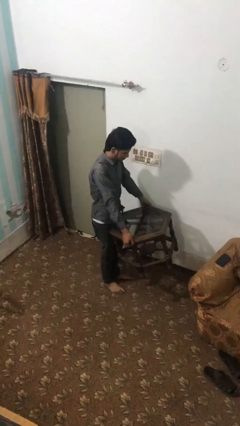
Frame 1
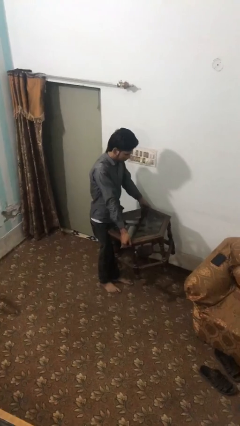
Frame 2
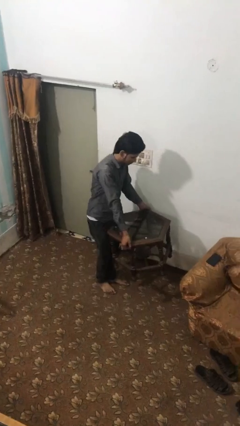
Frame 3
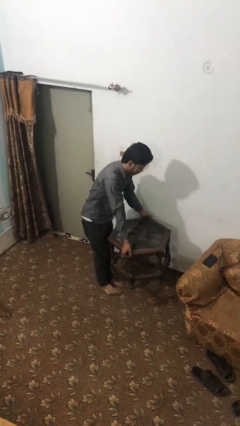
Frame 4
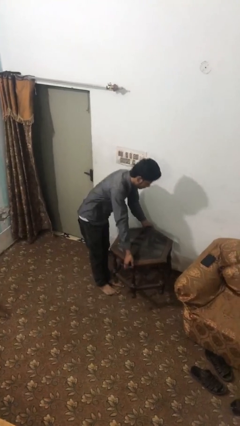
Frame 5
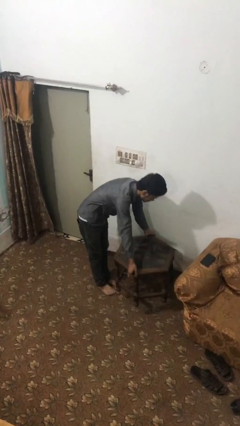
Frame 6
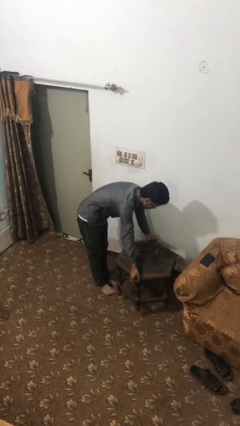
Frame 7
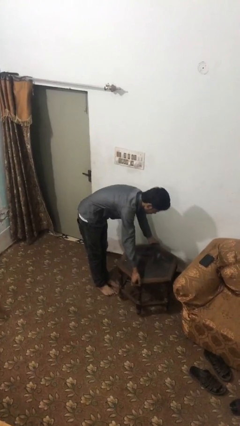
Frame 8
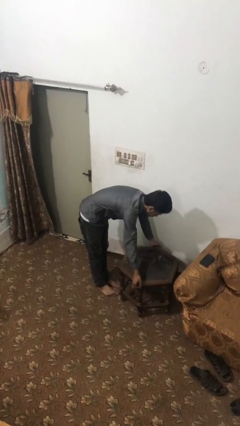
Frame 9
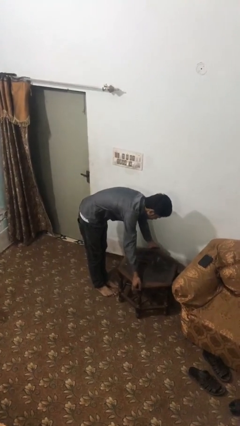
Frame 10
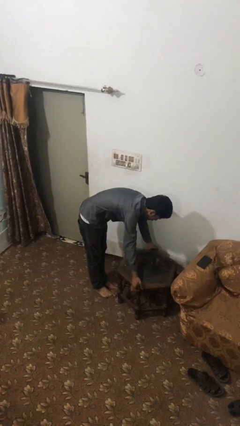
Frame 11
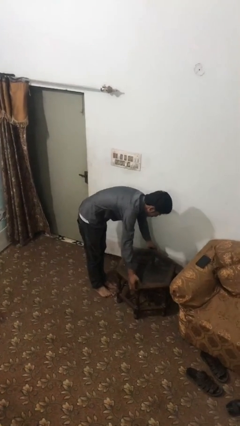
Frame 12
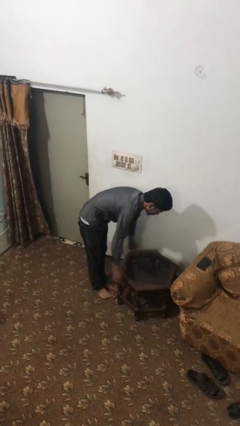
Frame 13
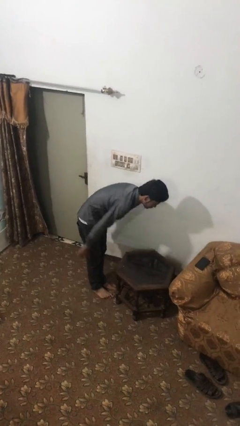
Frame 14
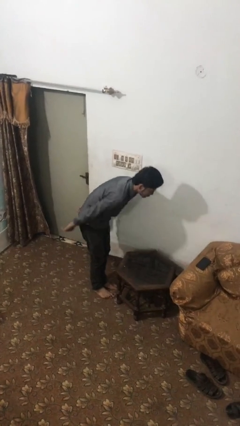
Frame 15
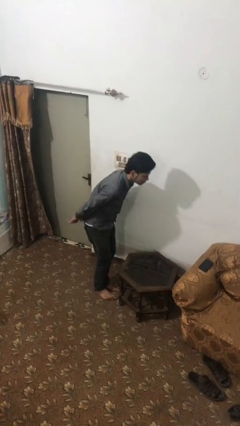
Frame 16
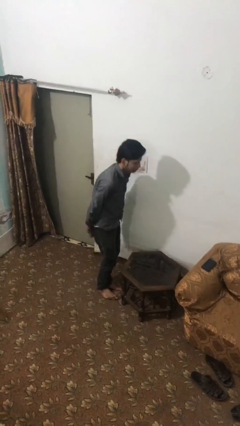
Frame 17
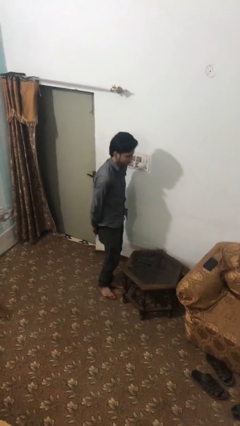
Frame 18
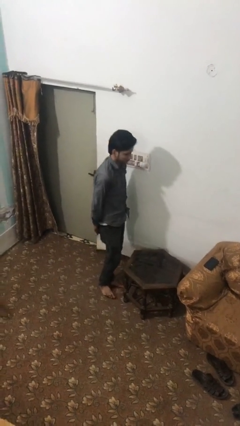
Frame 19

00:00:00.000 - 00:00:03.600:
person puts down object on floor

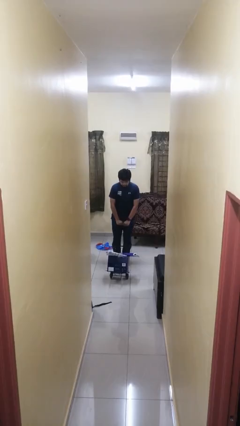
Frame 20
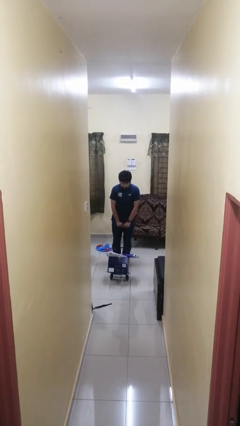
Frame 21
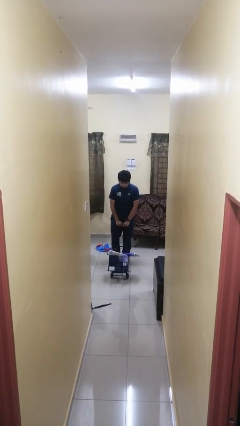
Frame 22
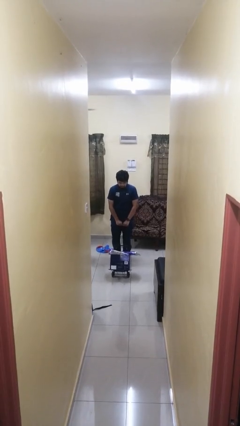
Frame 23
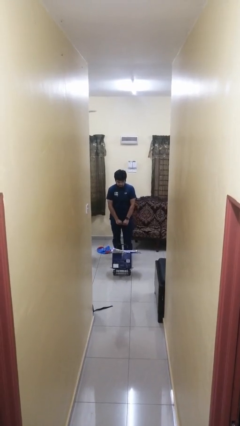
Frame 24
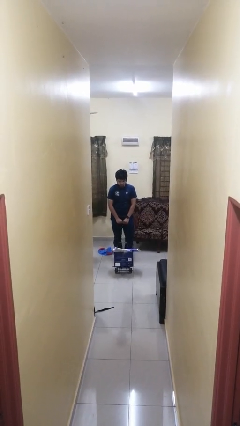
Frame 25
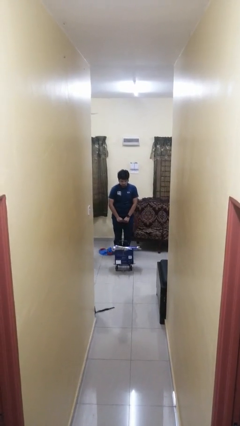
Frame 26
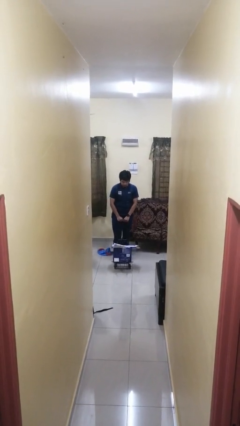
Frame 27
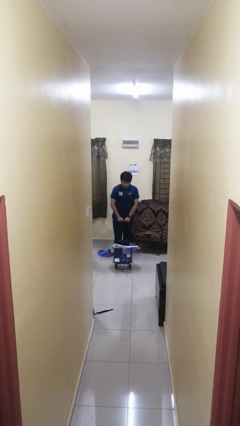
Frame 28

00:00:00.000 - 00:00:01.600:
person pulls wheeled cart

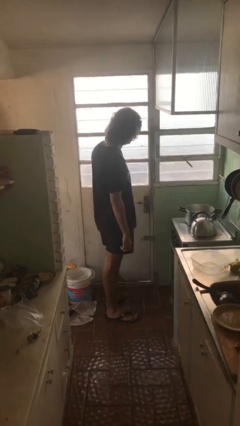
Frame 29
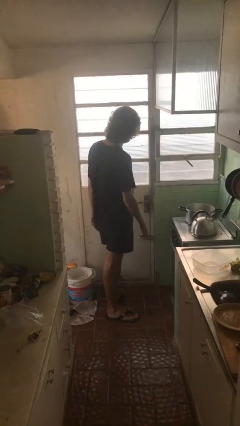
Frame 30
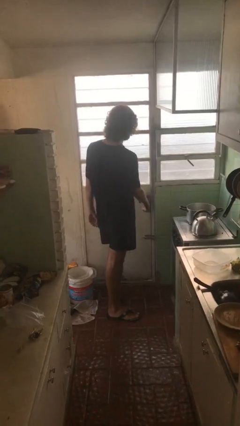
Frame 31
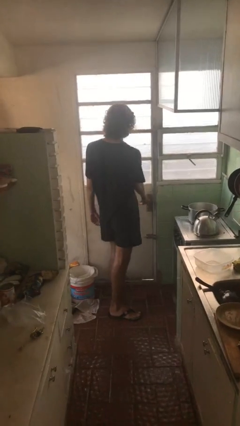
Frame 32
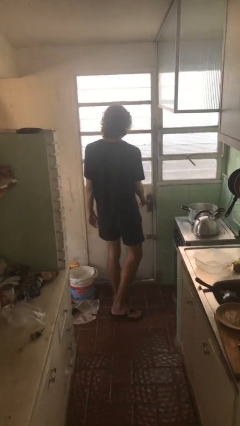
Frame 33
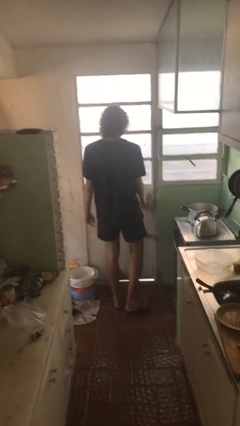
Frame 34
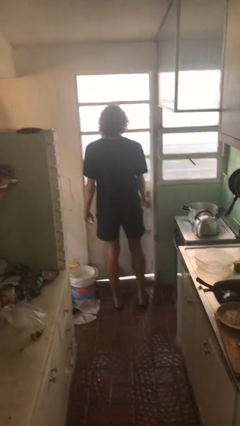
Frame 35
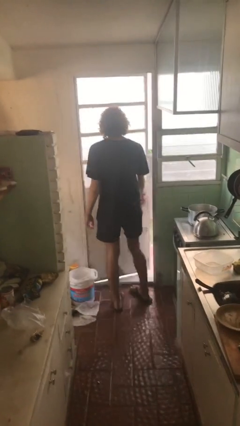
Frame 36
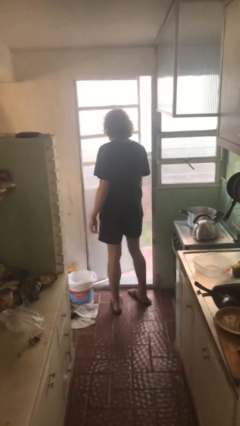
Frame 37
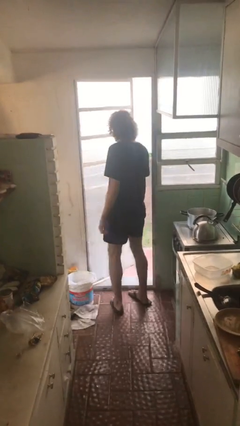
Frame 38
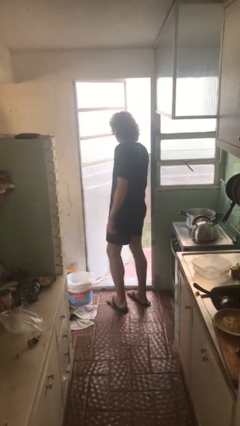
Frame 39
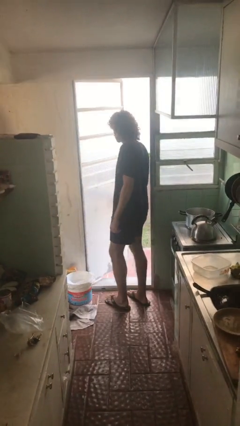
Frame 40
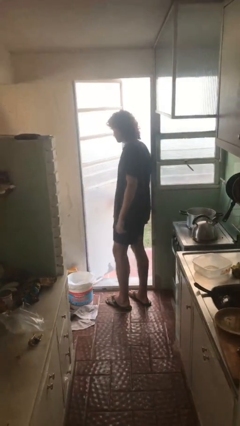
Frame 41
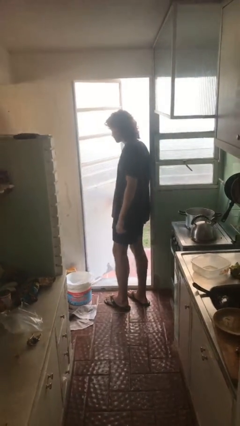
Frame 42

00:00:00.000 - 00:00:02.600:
person opens facility door

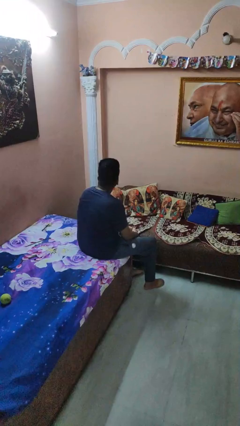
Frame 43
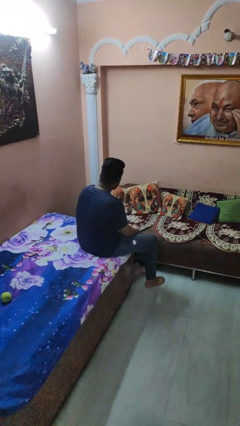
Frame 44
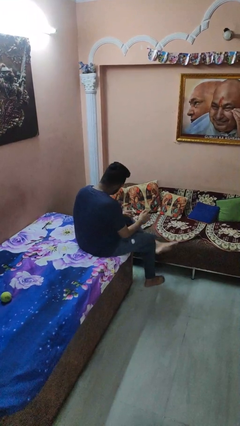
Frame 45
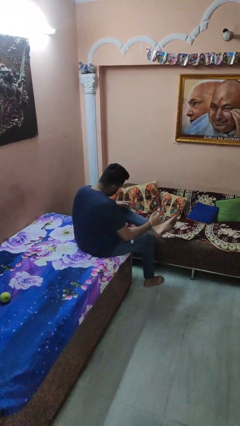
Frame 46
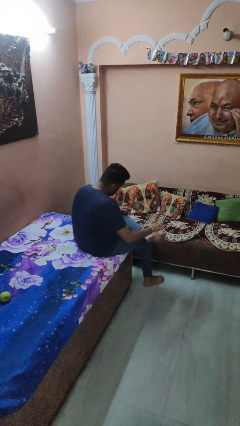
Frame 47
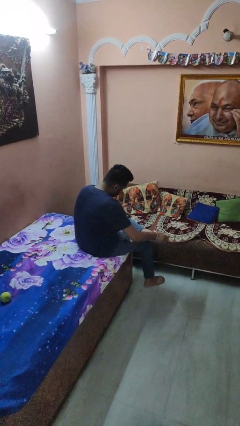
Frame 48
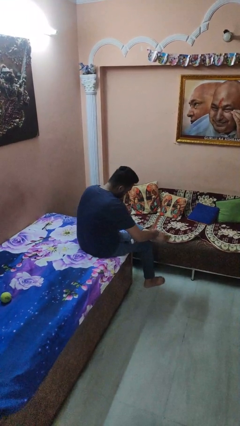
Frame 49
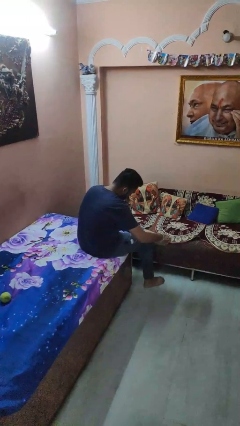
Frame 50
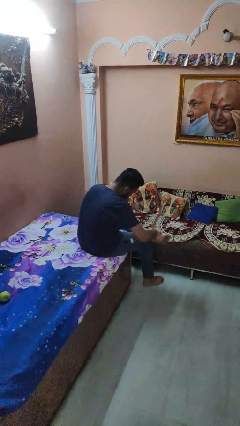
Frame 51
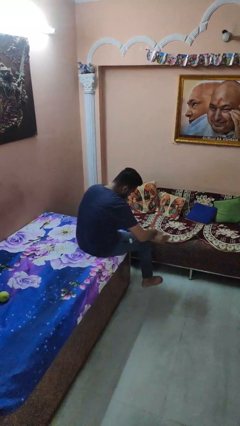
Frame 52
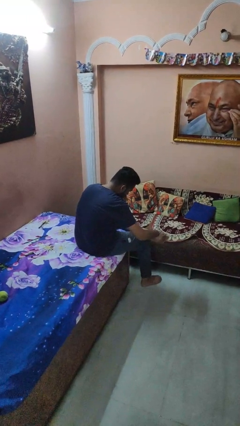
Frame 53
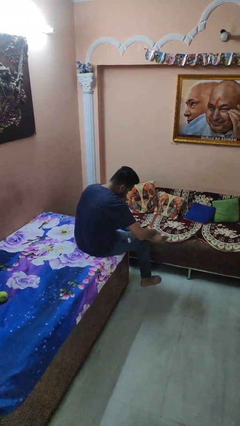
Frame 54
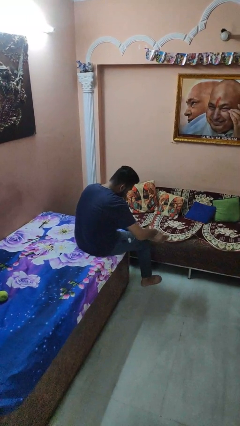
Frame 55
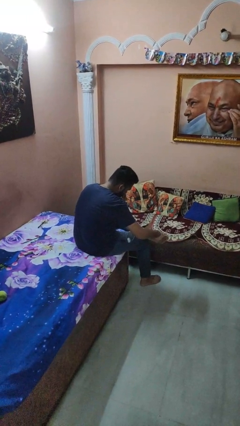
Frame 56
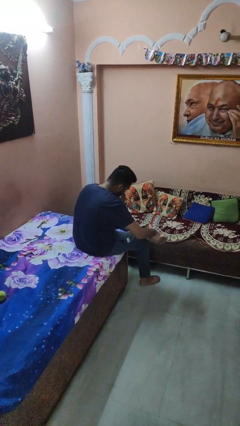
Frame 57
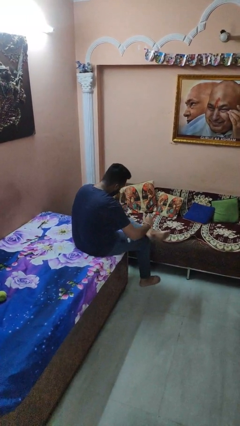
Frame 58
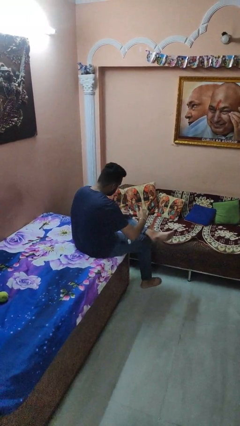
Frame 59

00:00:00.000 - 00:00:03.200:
person rubs foot

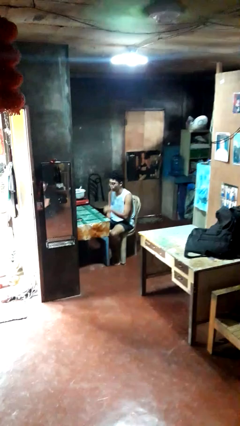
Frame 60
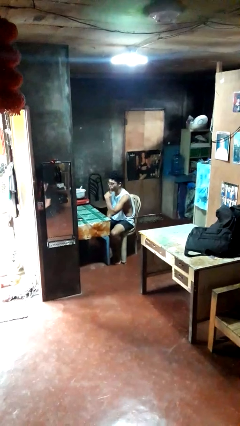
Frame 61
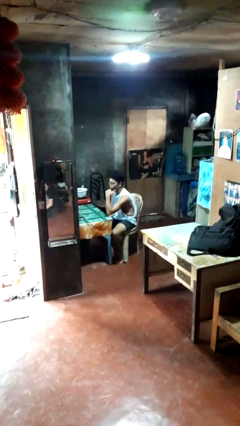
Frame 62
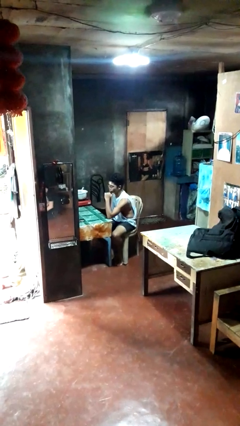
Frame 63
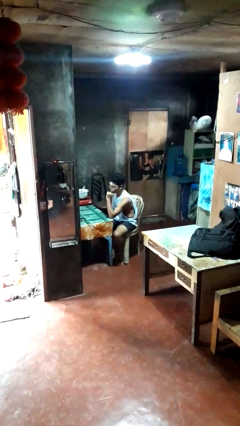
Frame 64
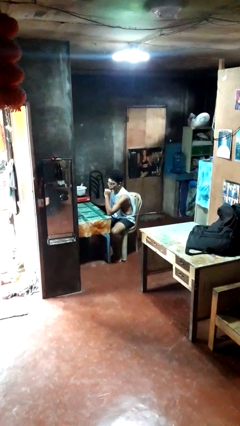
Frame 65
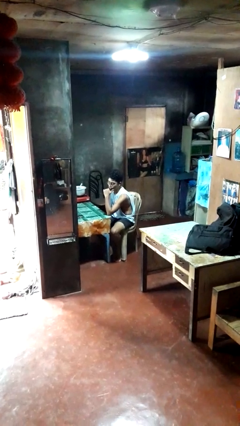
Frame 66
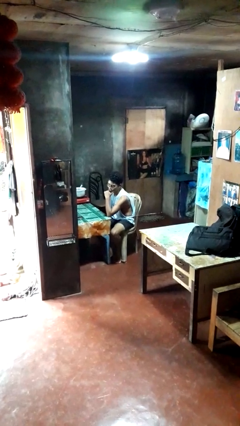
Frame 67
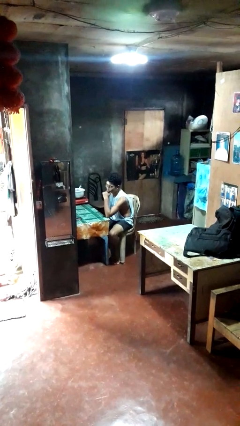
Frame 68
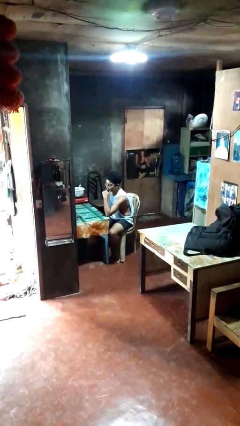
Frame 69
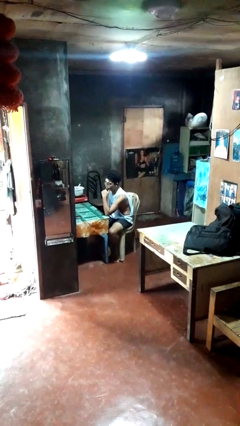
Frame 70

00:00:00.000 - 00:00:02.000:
person strokes chin

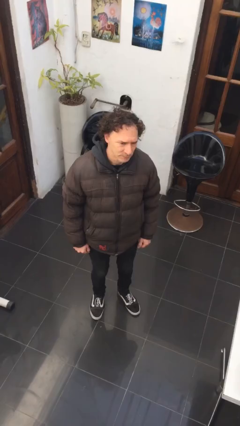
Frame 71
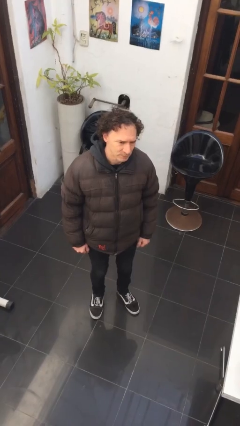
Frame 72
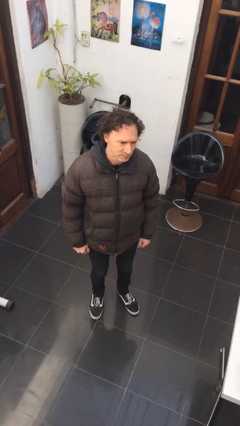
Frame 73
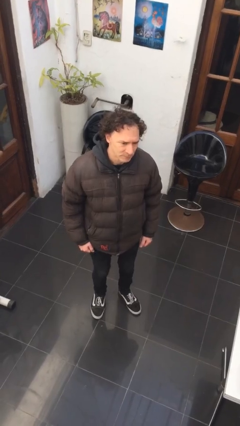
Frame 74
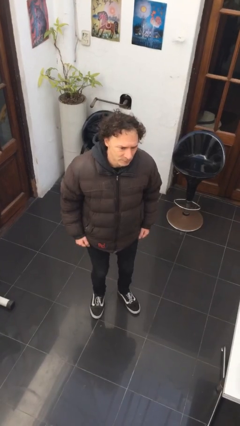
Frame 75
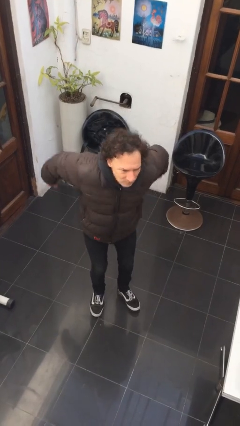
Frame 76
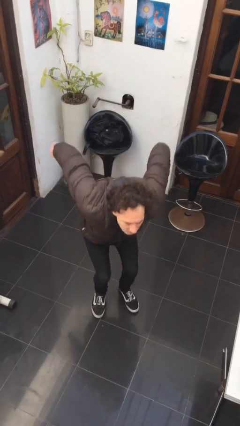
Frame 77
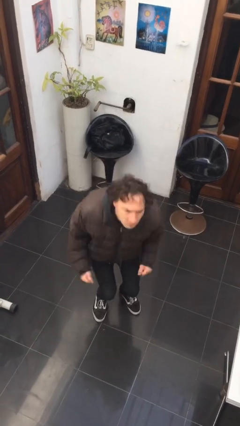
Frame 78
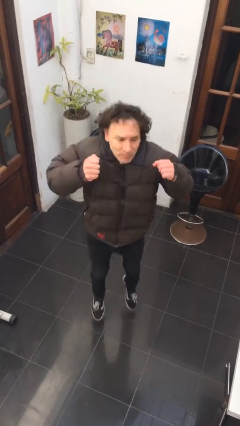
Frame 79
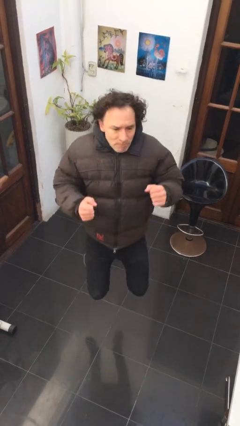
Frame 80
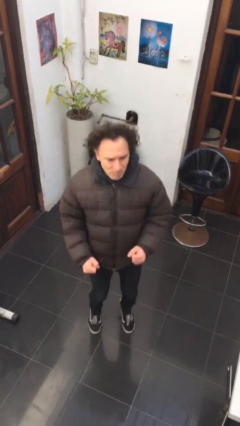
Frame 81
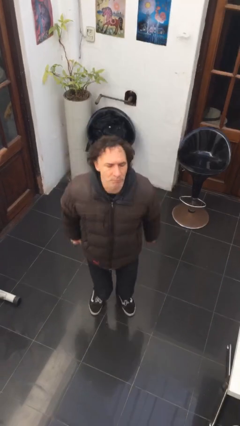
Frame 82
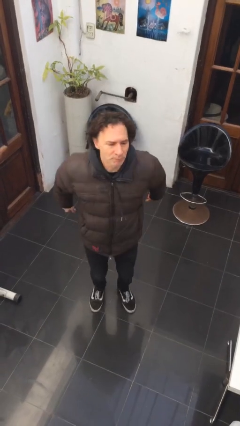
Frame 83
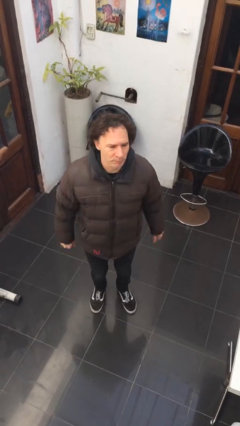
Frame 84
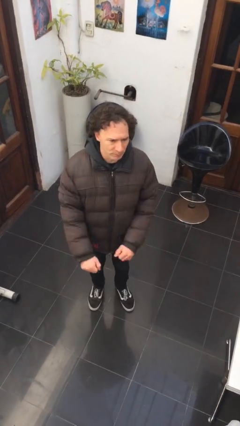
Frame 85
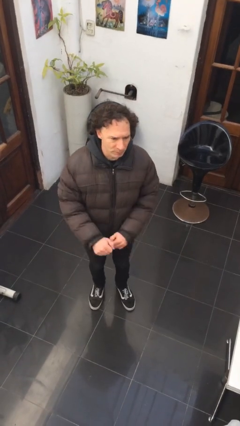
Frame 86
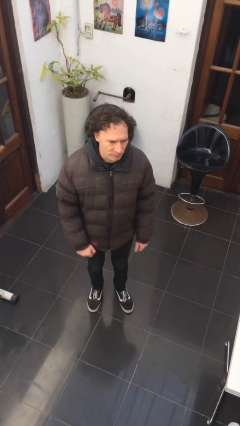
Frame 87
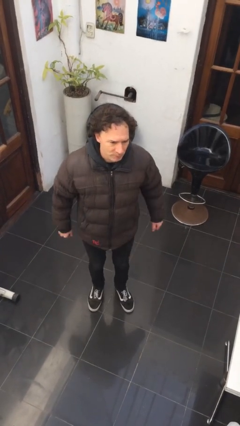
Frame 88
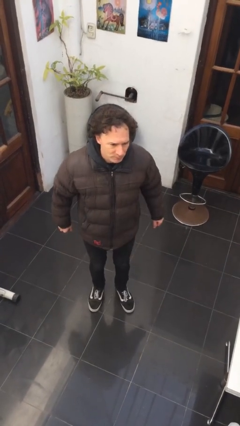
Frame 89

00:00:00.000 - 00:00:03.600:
person jumps

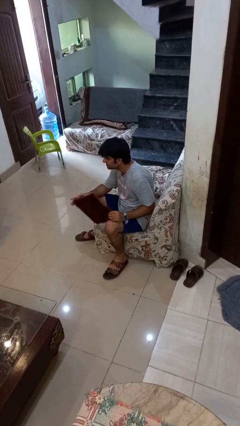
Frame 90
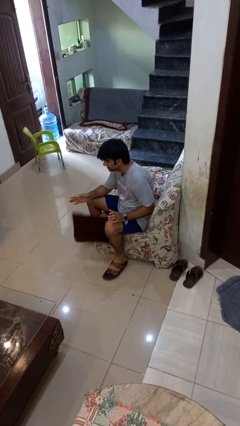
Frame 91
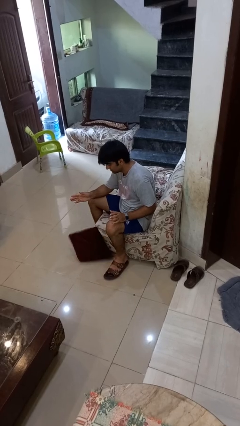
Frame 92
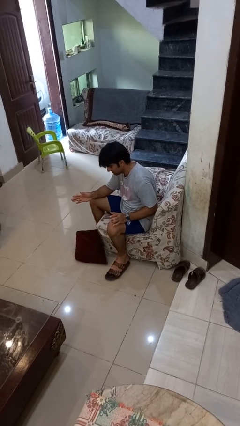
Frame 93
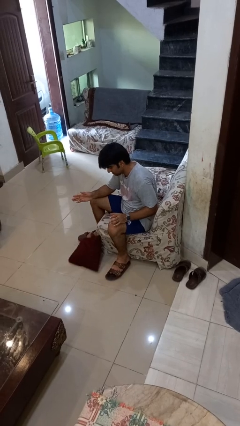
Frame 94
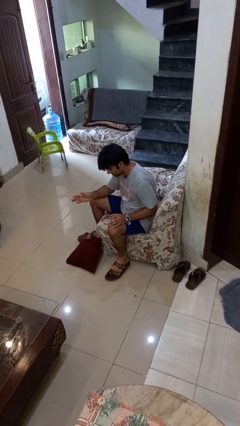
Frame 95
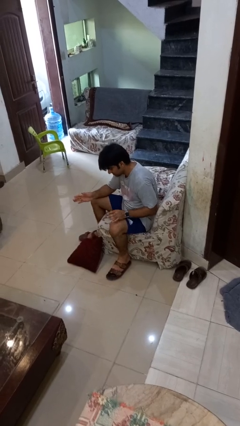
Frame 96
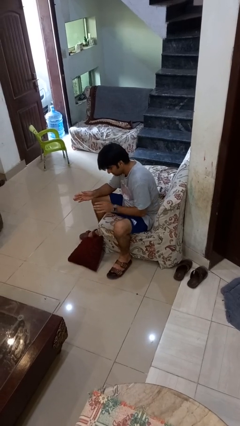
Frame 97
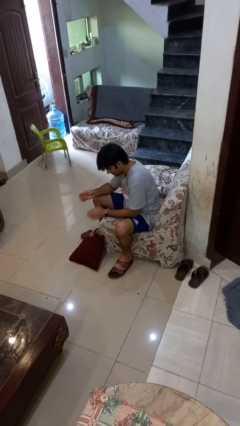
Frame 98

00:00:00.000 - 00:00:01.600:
person drops object
